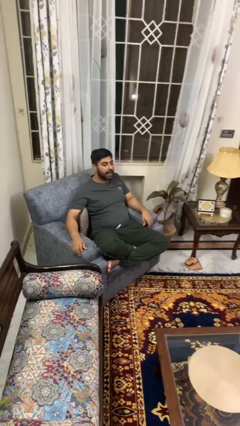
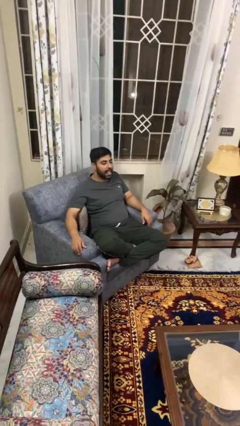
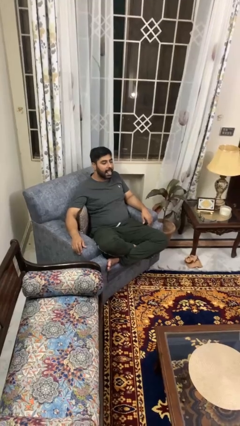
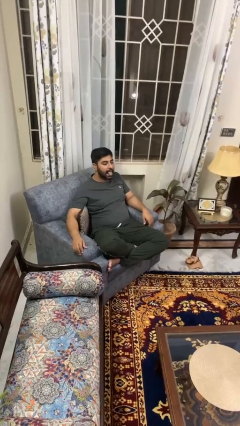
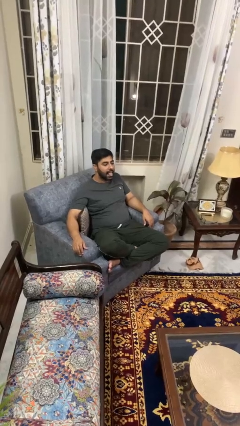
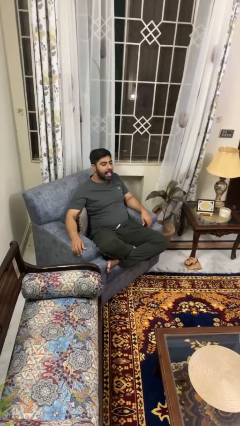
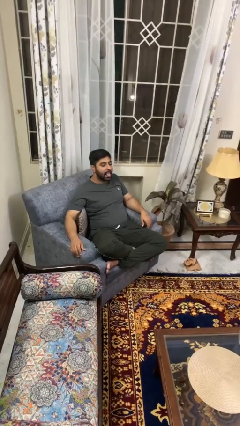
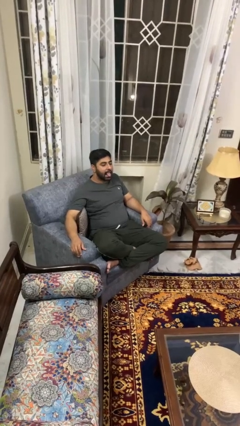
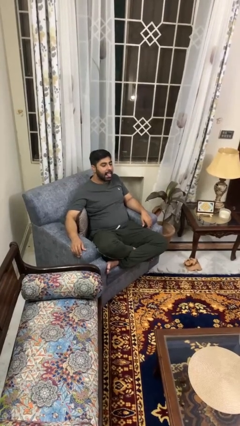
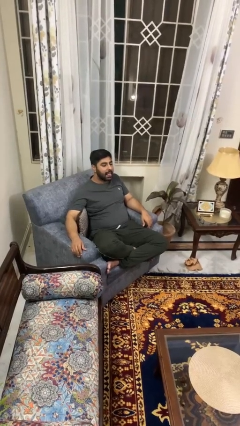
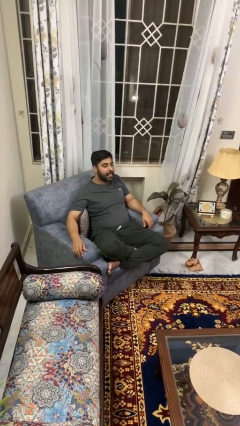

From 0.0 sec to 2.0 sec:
person sticks out tongue

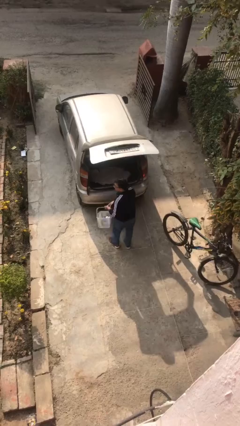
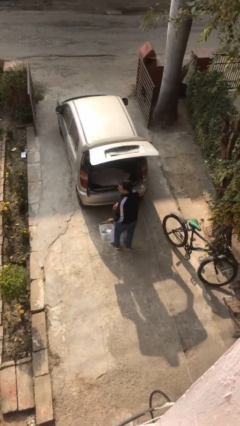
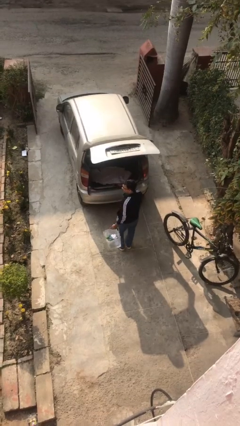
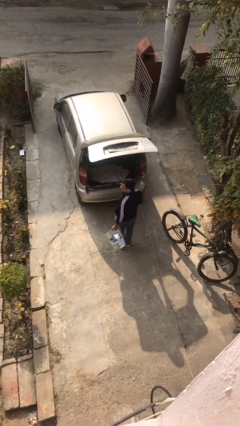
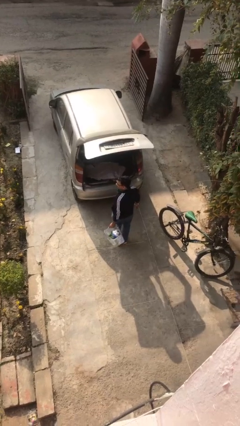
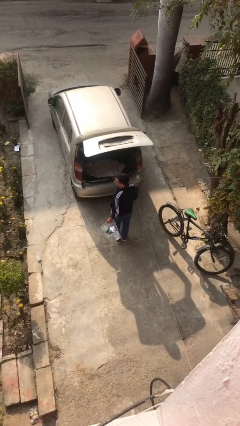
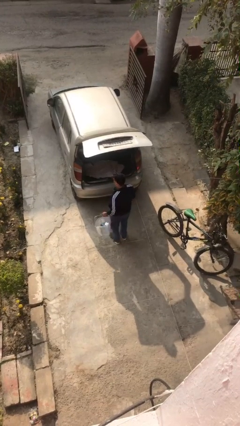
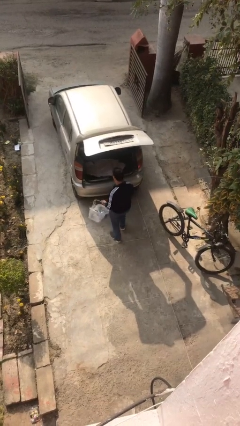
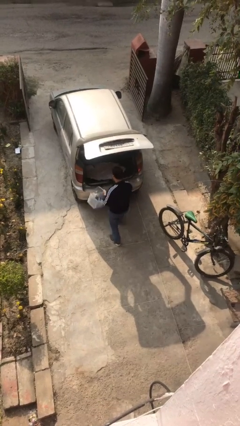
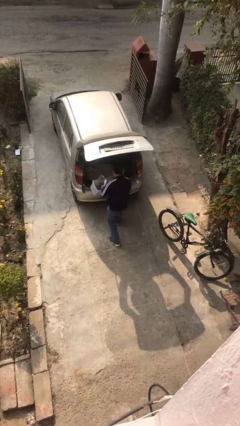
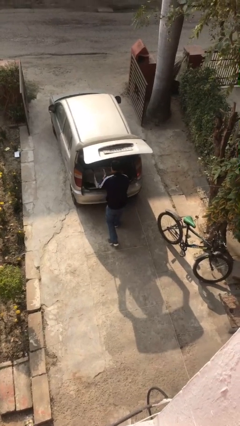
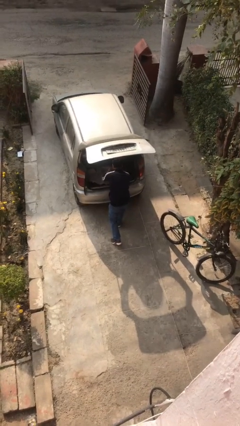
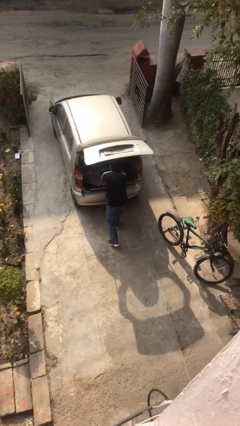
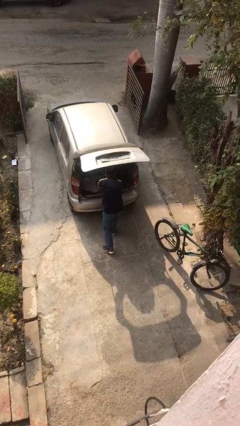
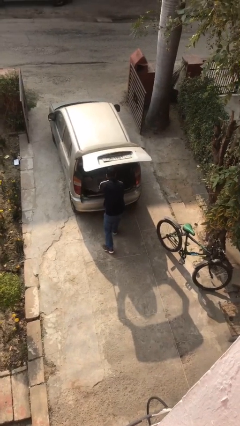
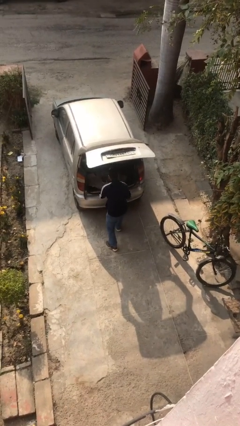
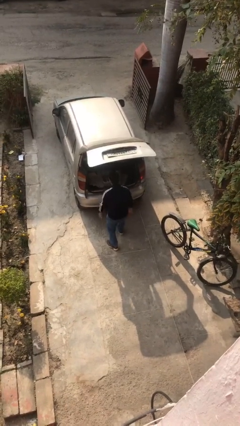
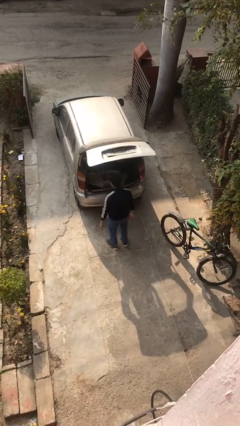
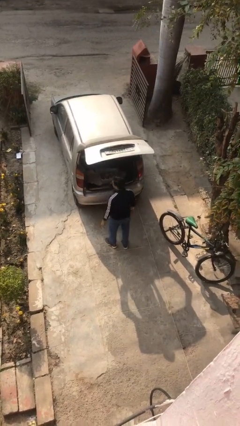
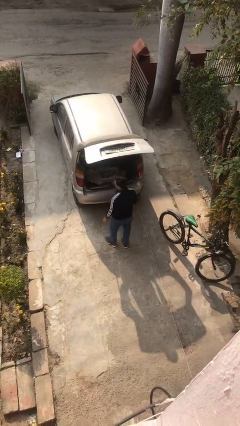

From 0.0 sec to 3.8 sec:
person loads car

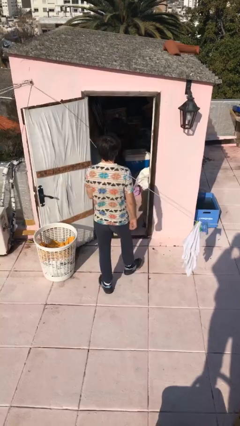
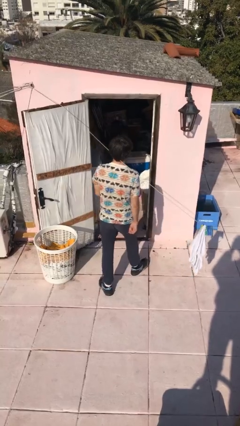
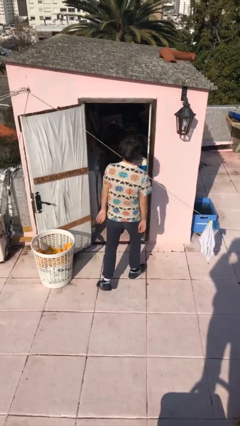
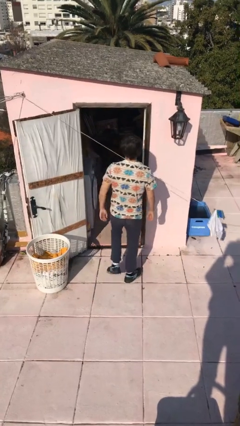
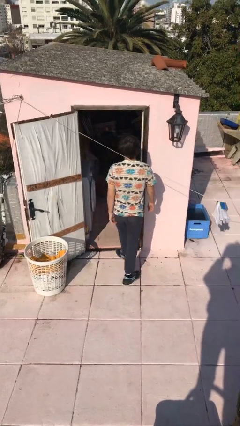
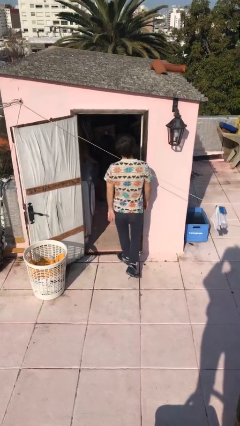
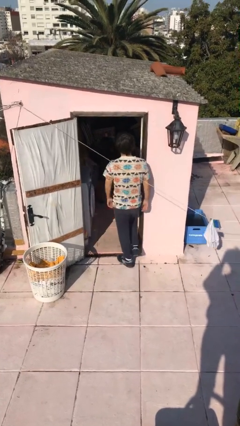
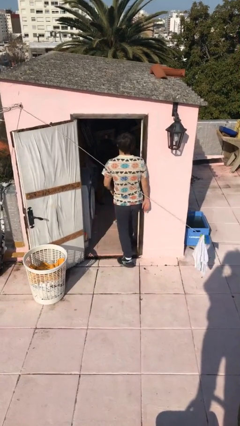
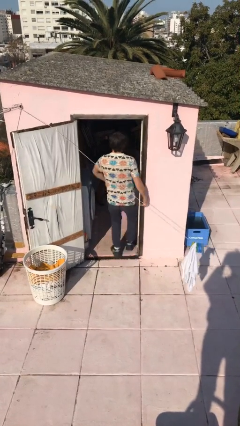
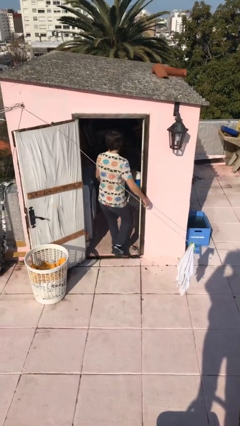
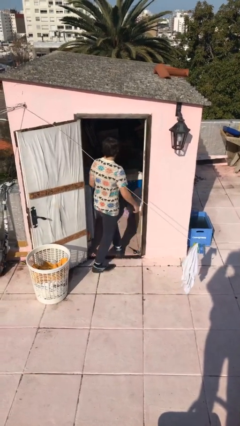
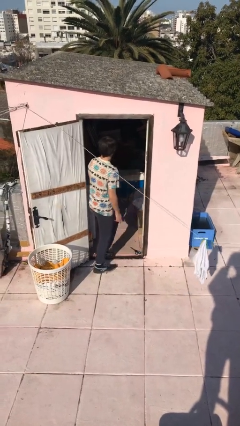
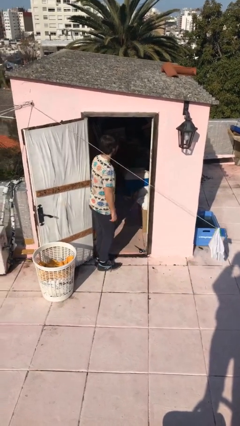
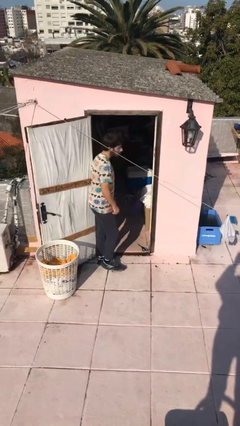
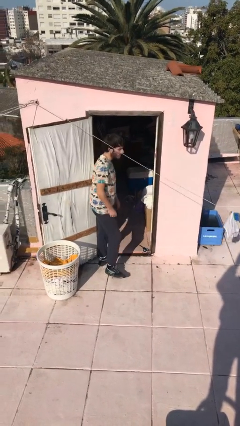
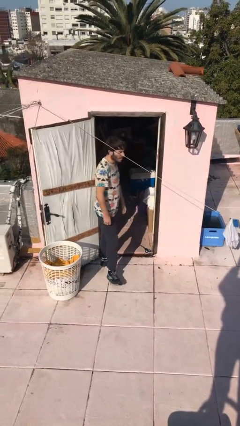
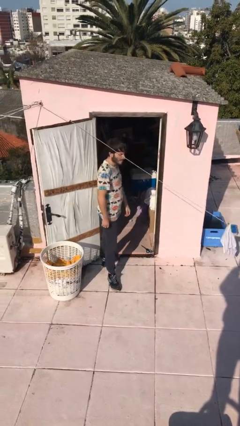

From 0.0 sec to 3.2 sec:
person bumps into wall

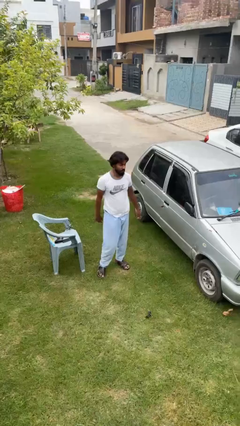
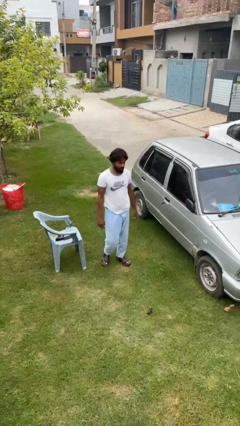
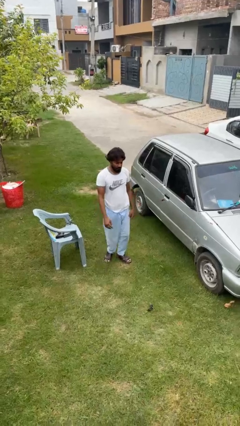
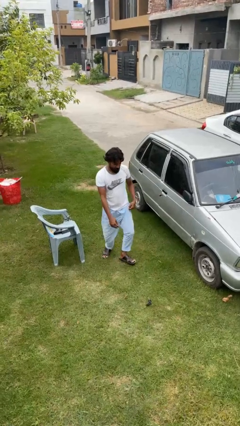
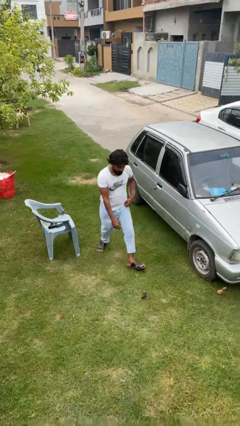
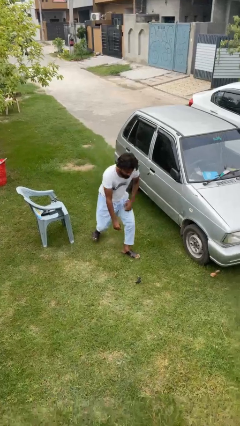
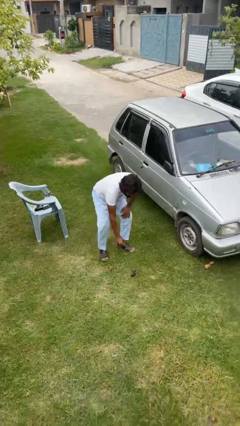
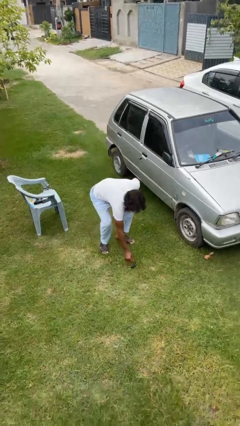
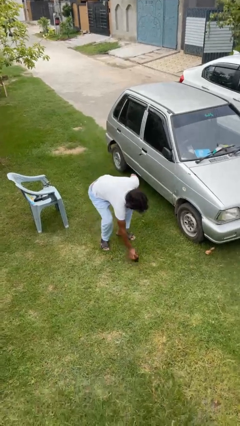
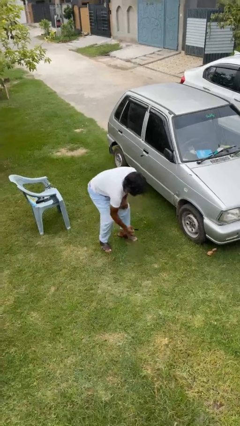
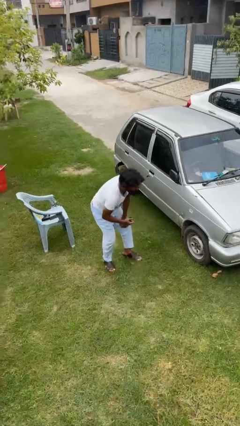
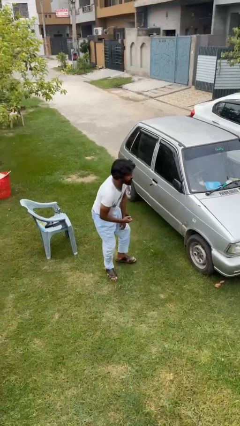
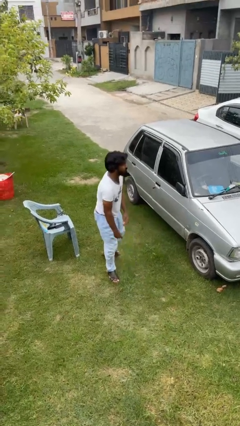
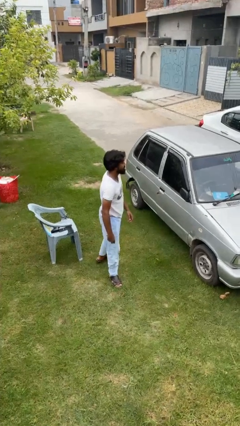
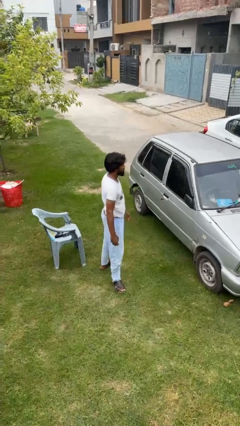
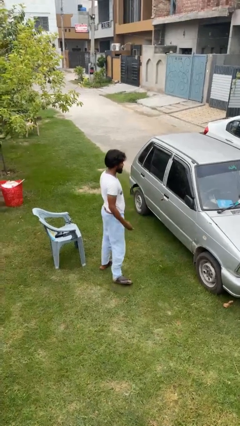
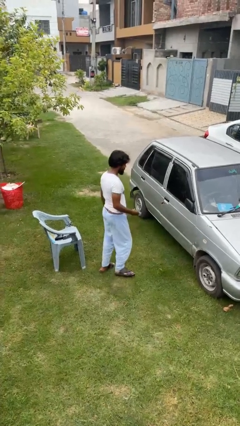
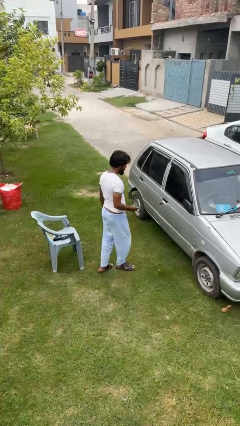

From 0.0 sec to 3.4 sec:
person picks up object from floor

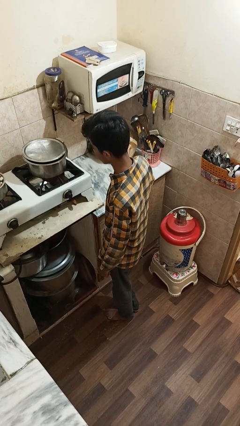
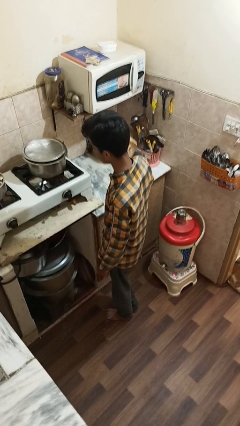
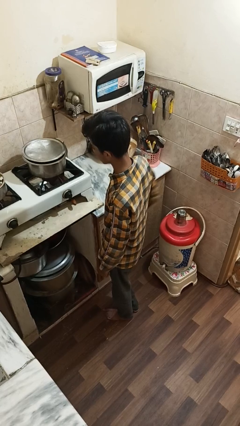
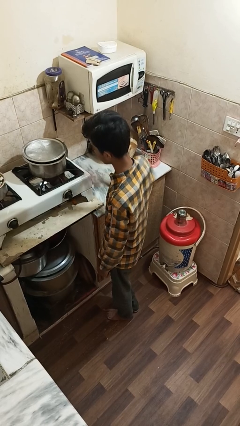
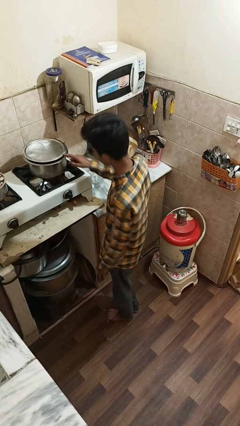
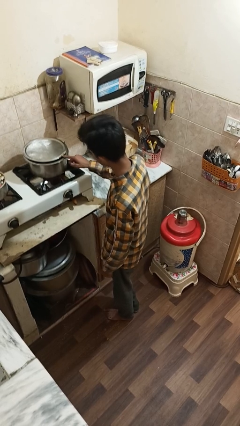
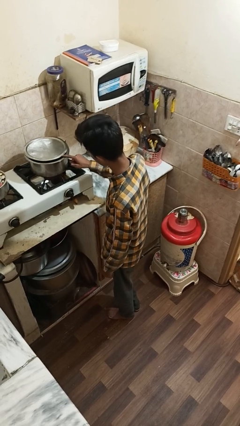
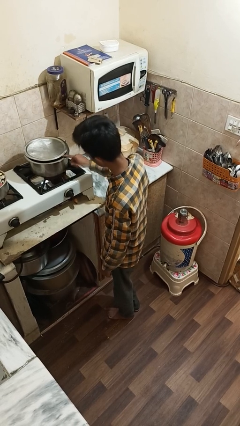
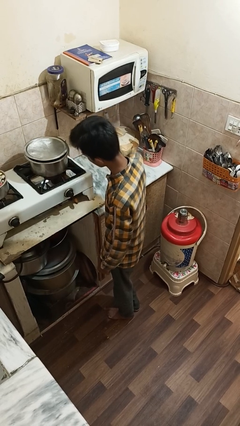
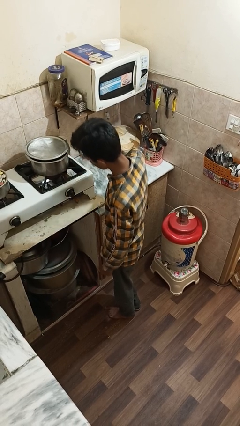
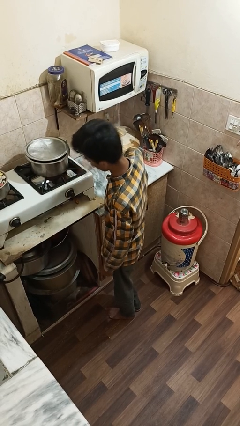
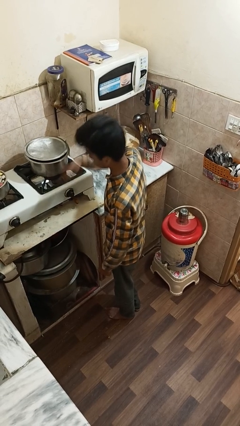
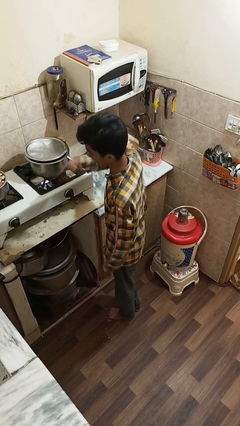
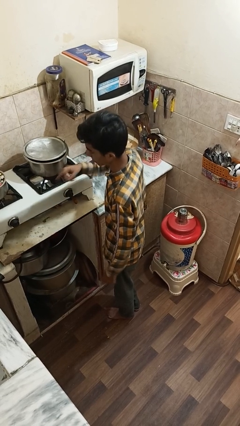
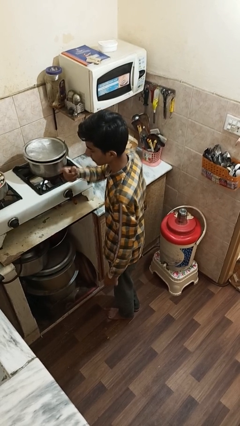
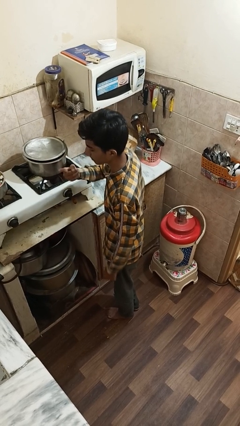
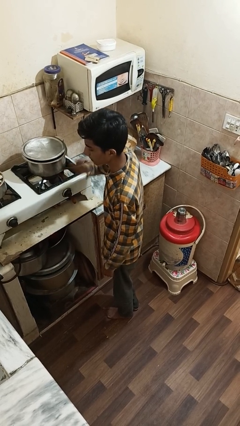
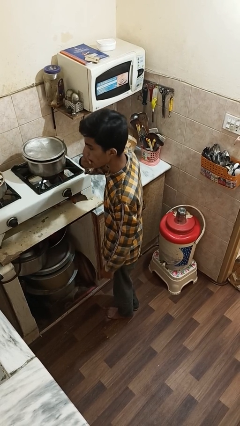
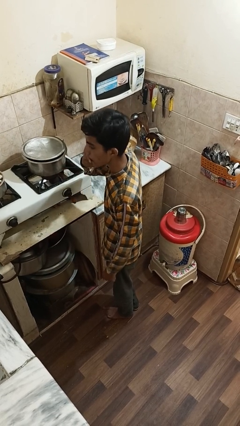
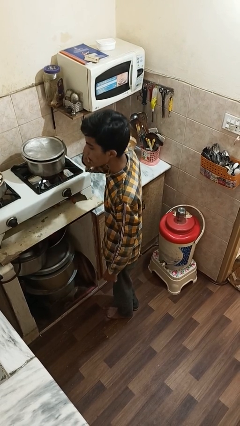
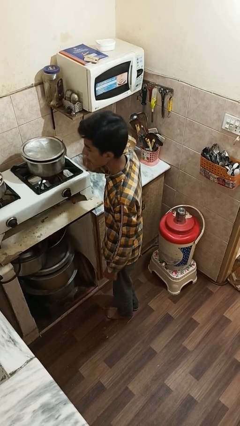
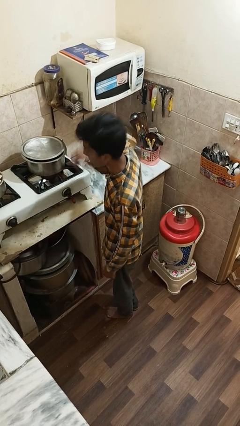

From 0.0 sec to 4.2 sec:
person burns hand

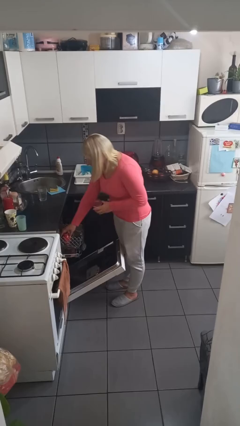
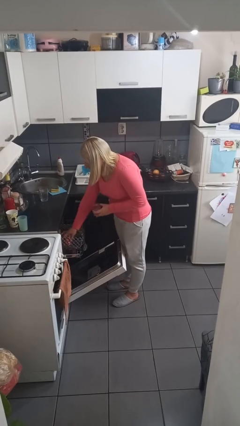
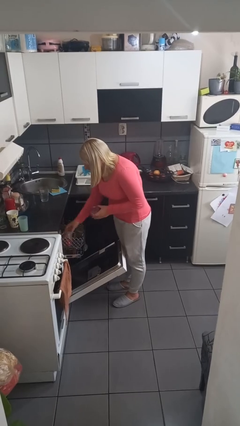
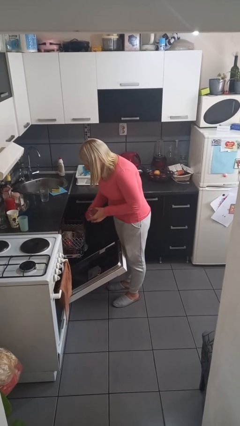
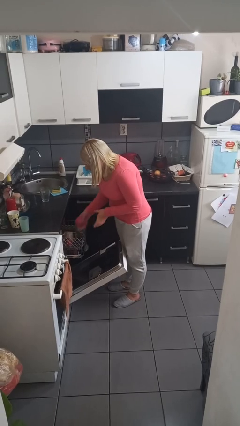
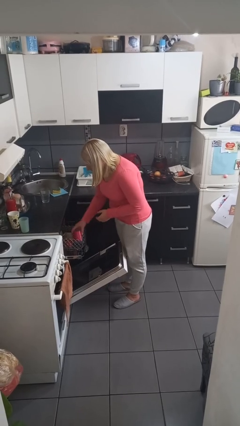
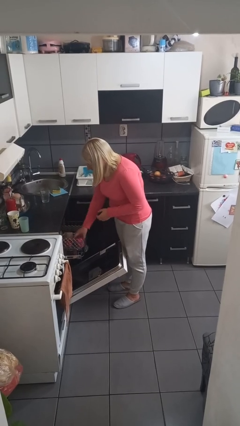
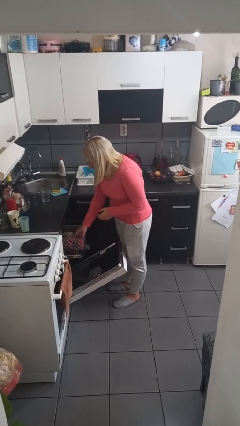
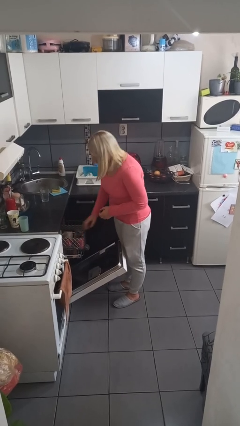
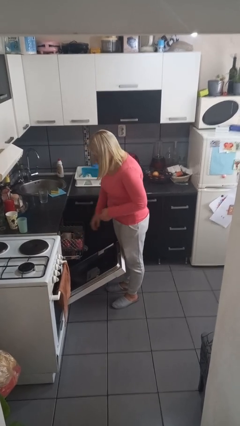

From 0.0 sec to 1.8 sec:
person loads dishwasher
